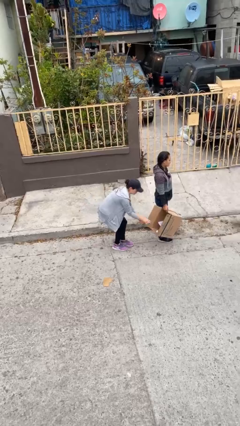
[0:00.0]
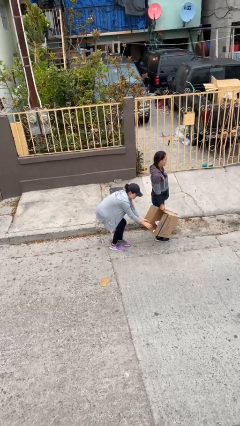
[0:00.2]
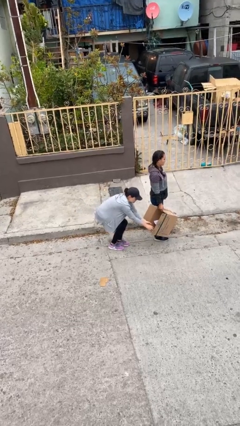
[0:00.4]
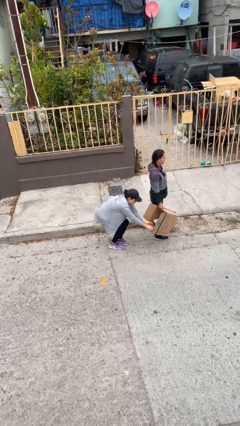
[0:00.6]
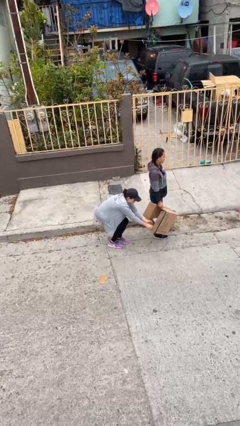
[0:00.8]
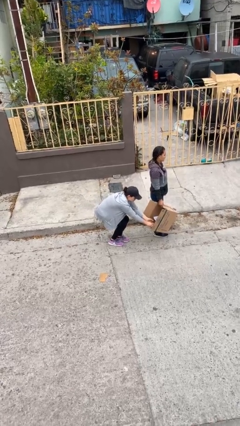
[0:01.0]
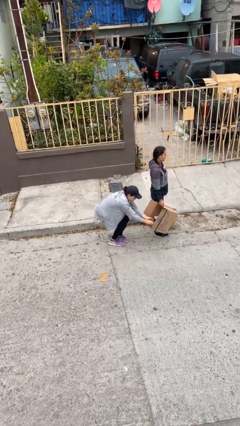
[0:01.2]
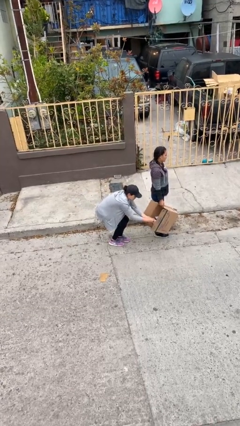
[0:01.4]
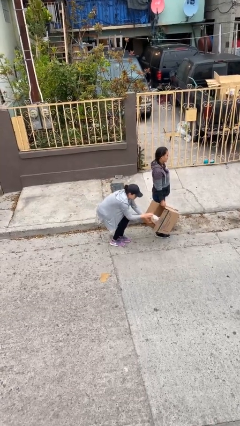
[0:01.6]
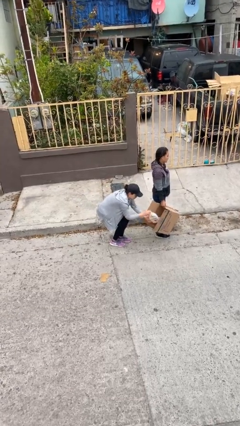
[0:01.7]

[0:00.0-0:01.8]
person steals object from person

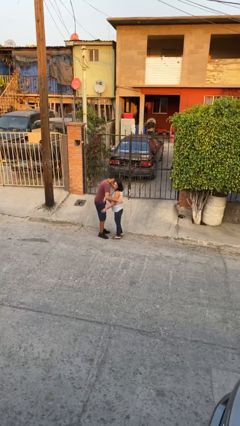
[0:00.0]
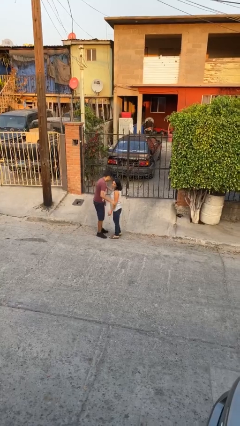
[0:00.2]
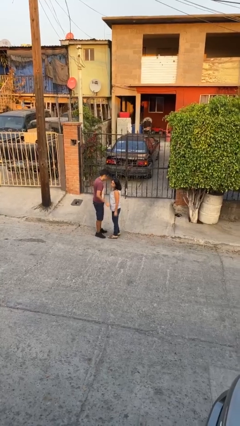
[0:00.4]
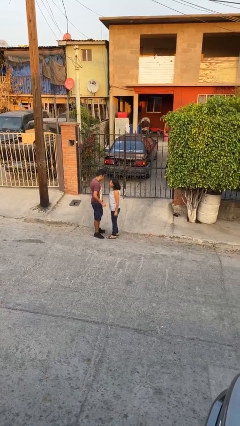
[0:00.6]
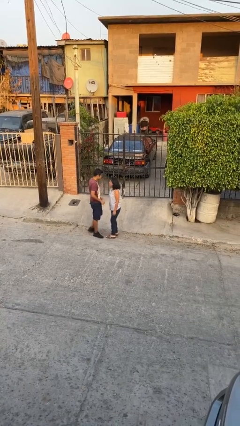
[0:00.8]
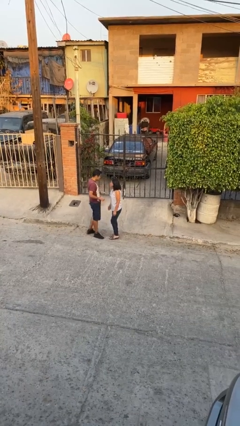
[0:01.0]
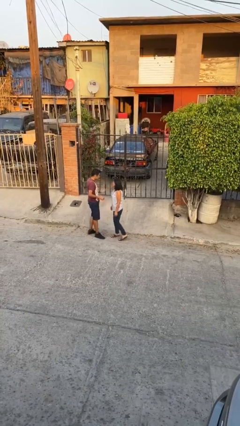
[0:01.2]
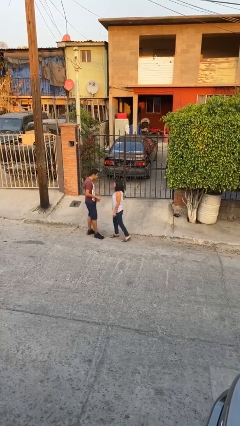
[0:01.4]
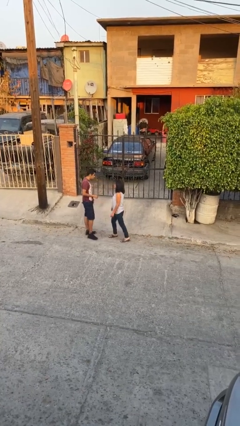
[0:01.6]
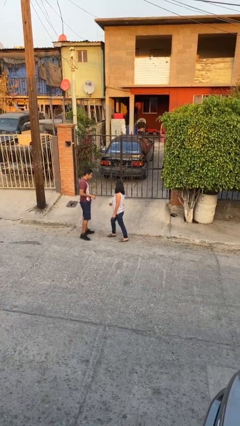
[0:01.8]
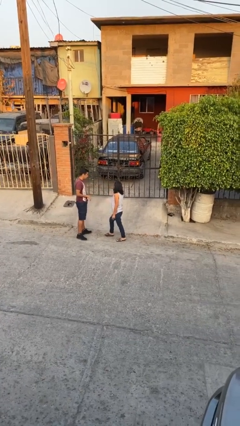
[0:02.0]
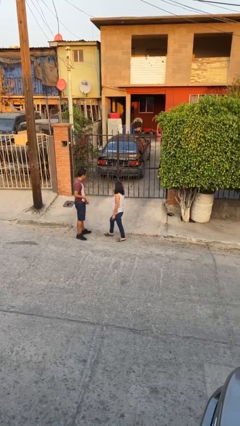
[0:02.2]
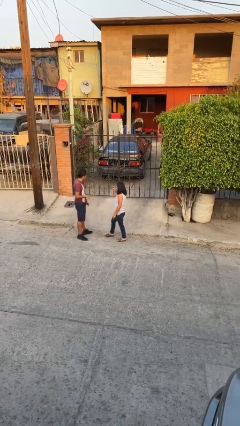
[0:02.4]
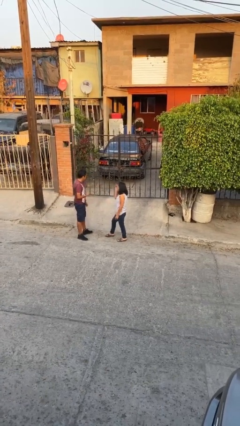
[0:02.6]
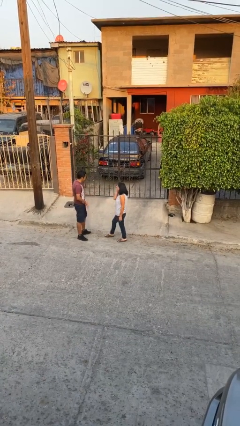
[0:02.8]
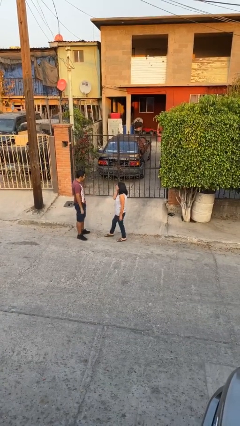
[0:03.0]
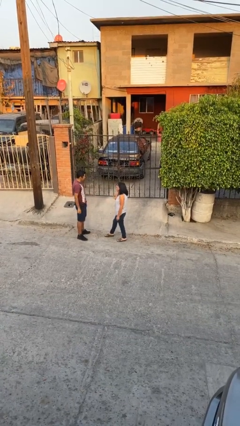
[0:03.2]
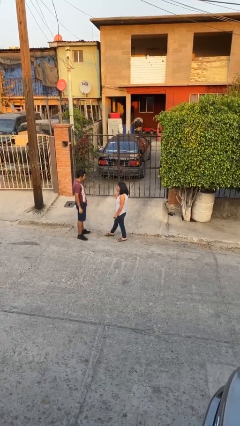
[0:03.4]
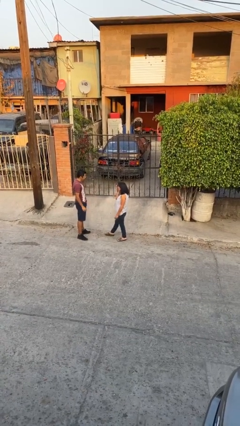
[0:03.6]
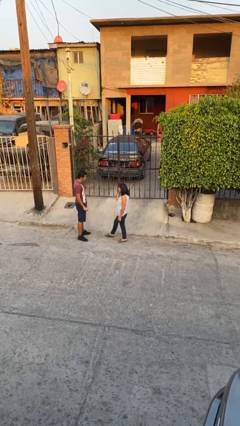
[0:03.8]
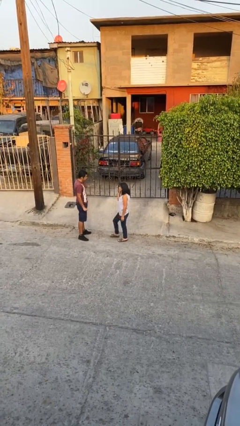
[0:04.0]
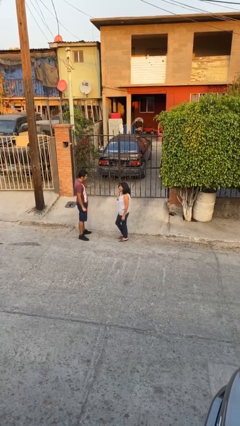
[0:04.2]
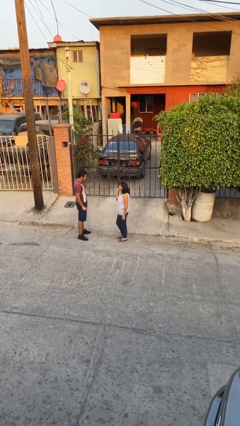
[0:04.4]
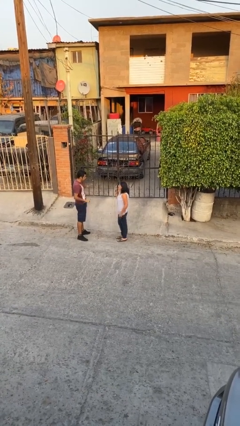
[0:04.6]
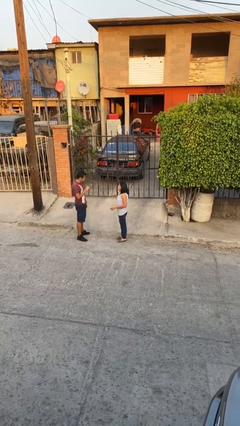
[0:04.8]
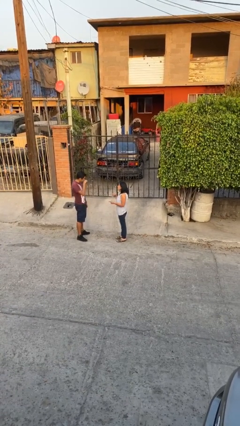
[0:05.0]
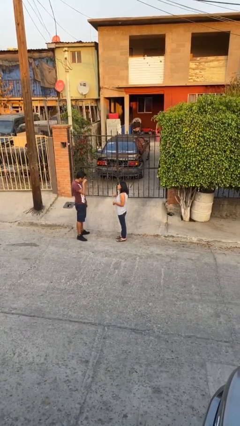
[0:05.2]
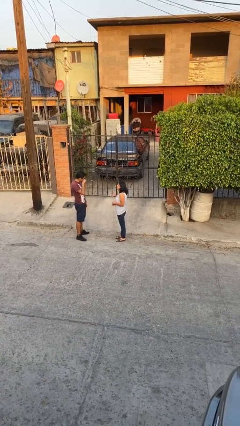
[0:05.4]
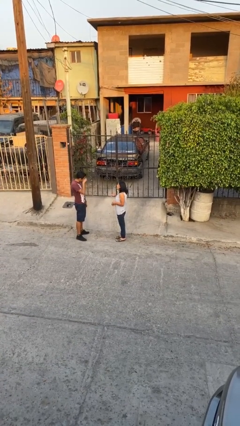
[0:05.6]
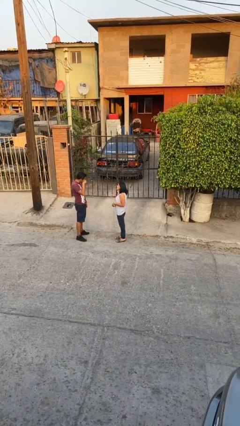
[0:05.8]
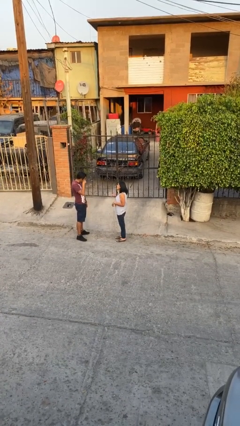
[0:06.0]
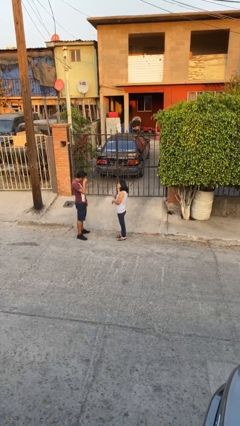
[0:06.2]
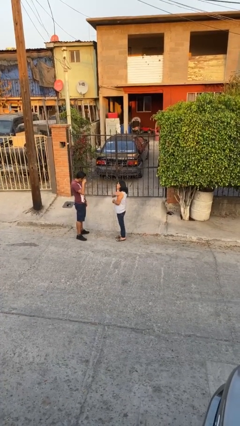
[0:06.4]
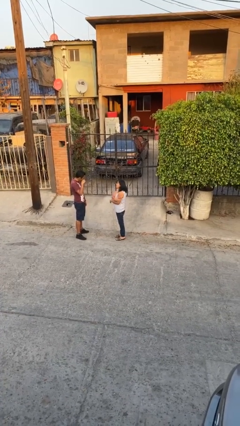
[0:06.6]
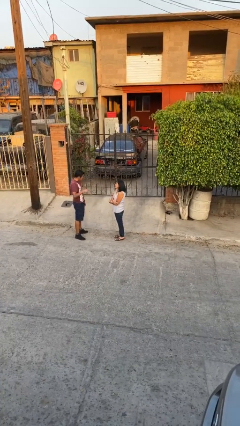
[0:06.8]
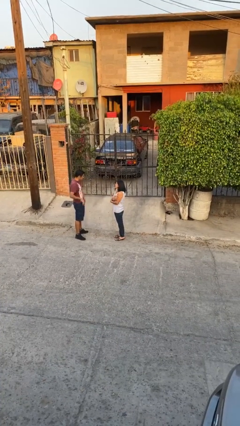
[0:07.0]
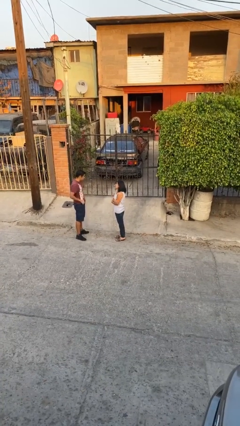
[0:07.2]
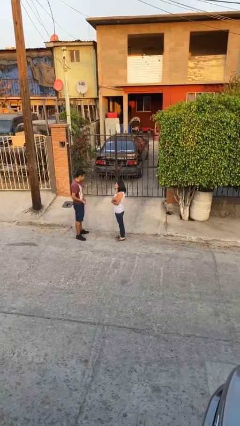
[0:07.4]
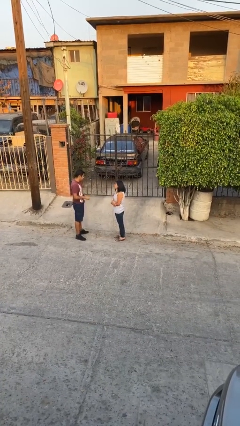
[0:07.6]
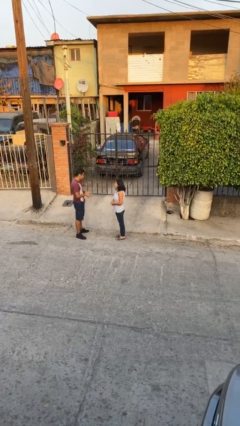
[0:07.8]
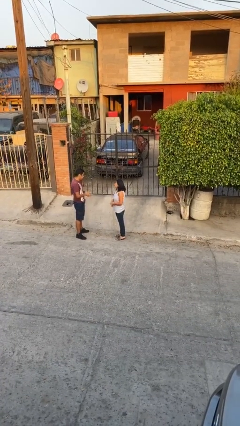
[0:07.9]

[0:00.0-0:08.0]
person talks to person

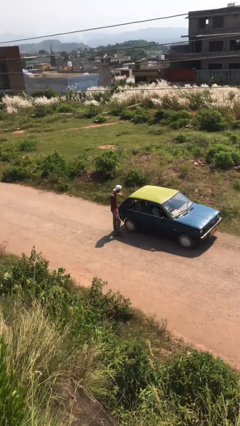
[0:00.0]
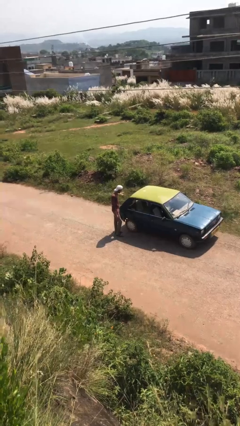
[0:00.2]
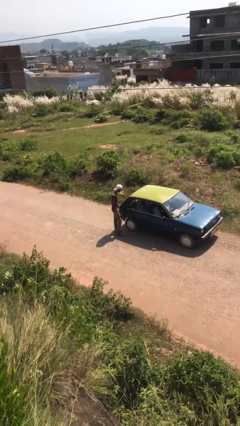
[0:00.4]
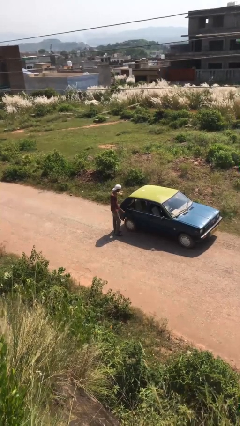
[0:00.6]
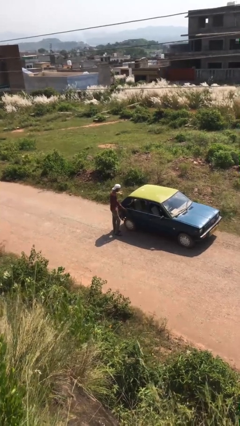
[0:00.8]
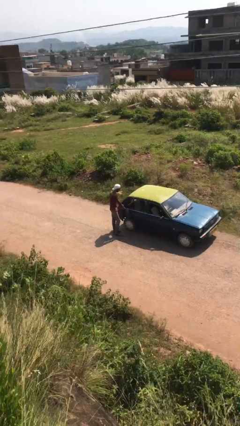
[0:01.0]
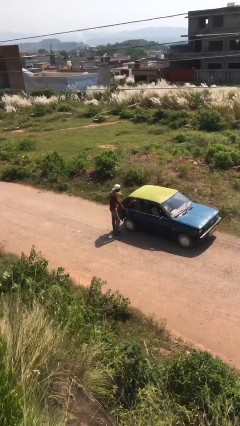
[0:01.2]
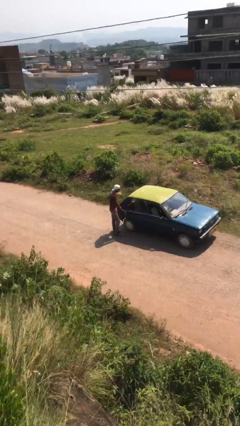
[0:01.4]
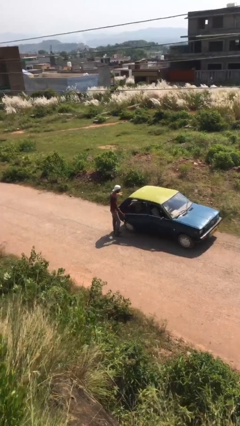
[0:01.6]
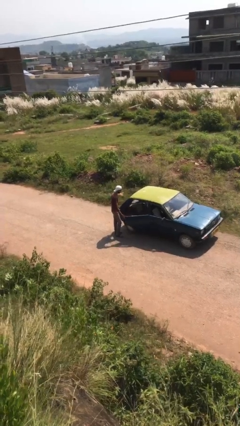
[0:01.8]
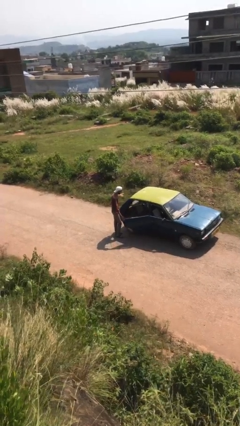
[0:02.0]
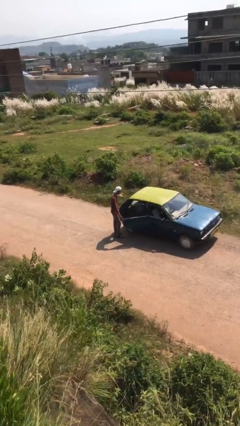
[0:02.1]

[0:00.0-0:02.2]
person opens car door

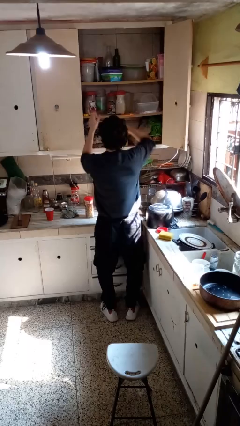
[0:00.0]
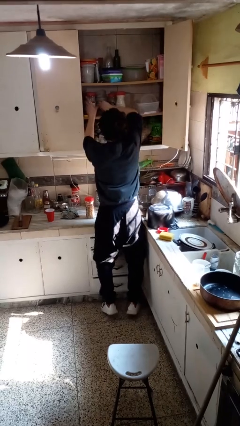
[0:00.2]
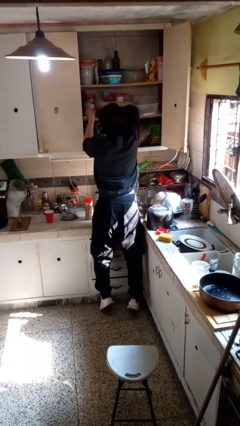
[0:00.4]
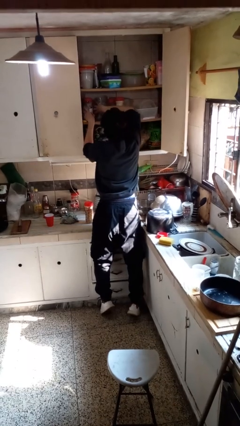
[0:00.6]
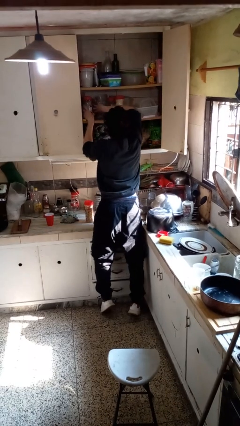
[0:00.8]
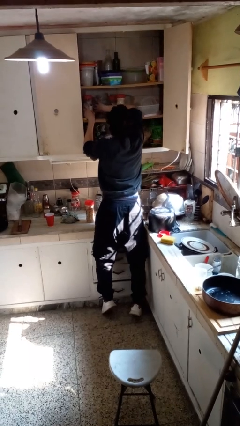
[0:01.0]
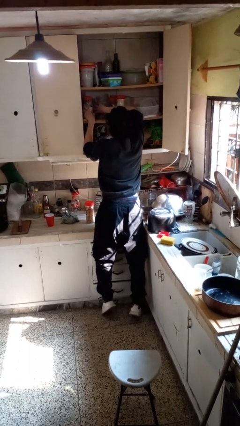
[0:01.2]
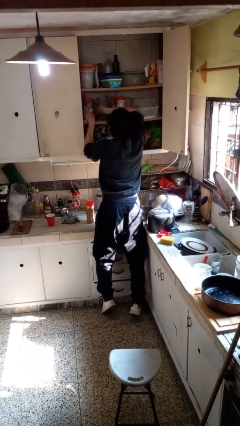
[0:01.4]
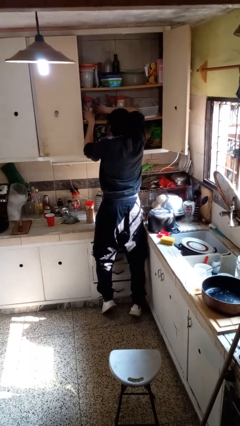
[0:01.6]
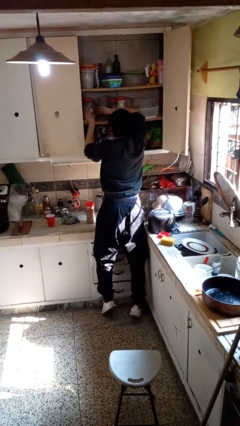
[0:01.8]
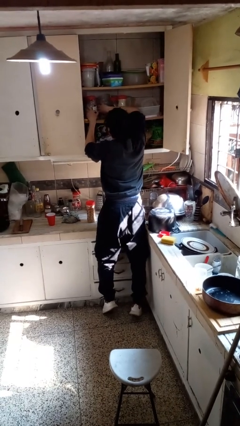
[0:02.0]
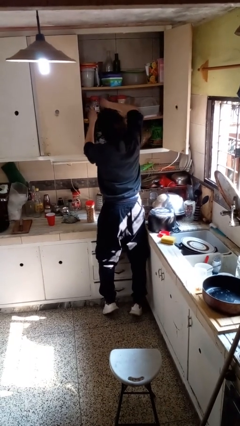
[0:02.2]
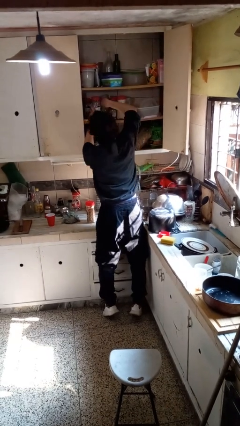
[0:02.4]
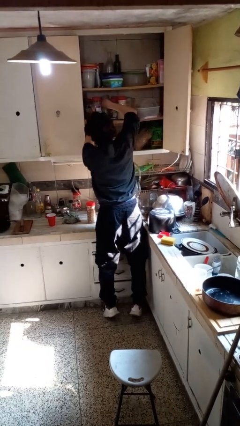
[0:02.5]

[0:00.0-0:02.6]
person searches in cabinet

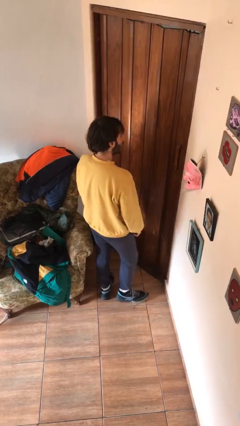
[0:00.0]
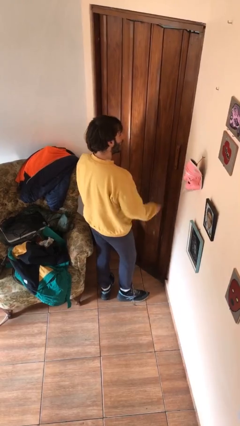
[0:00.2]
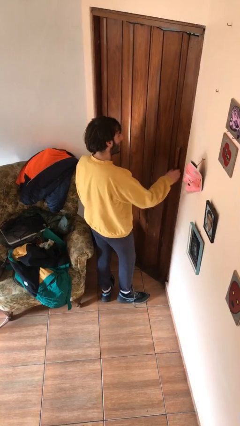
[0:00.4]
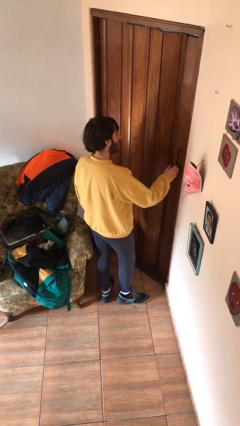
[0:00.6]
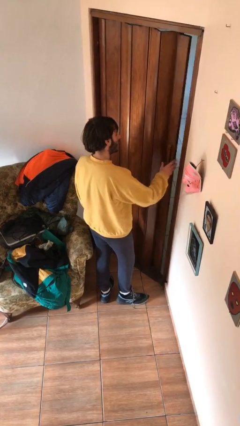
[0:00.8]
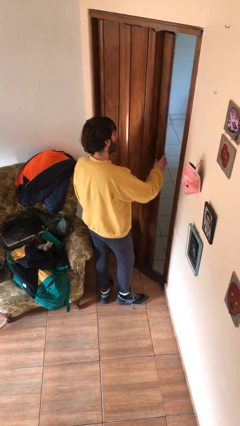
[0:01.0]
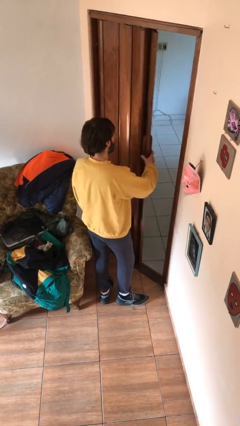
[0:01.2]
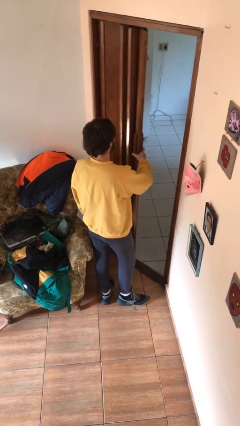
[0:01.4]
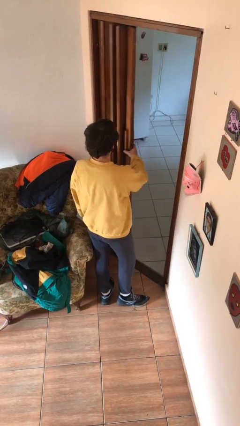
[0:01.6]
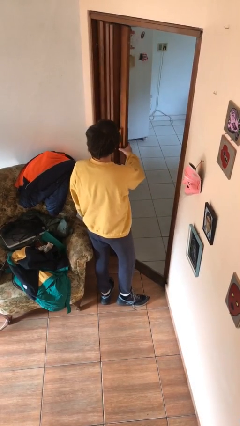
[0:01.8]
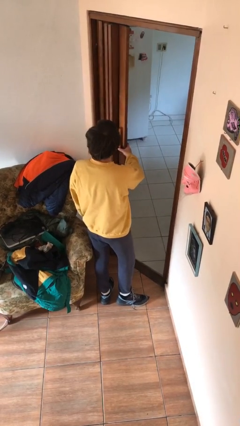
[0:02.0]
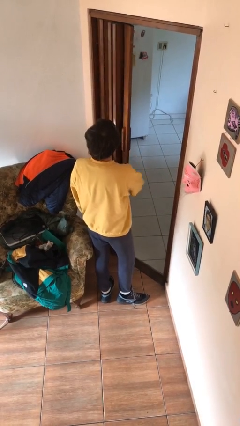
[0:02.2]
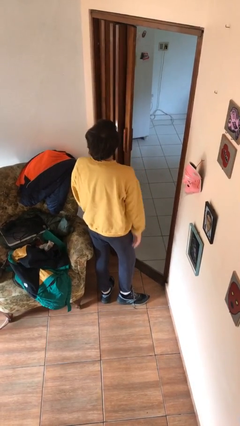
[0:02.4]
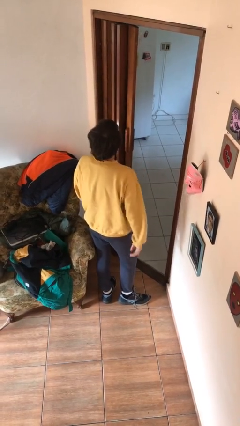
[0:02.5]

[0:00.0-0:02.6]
person opens sliding door

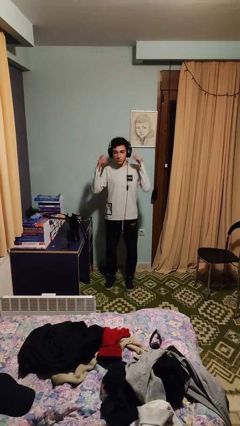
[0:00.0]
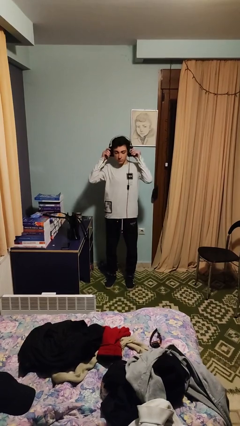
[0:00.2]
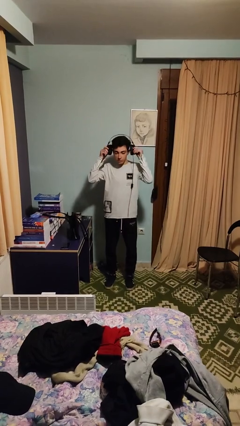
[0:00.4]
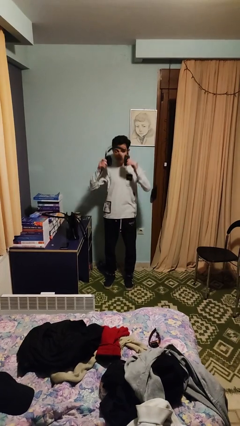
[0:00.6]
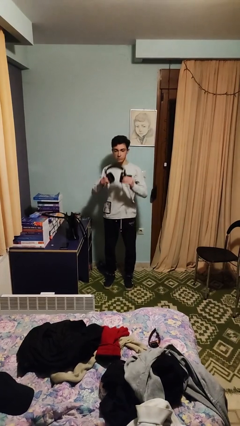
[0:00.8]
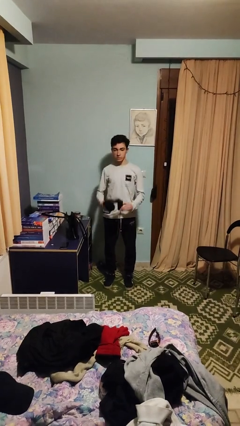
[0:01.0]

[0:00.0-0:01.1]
person takes off headphones
